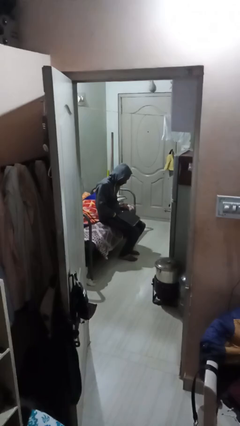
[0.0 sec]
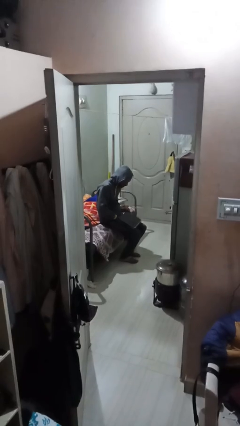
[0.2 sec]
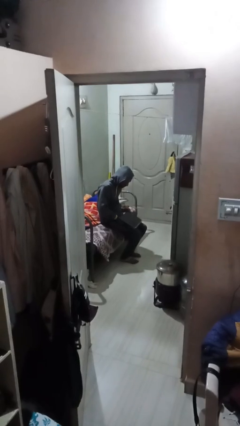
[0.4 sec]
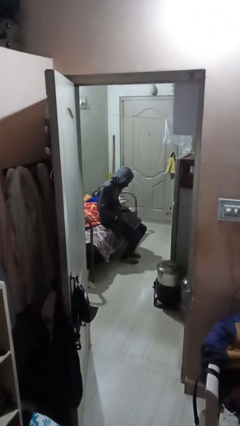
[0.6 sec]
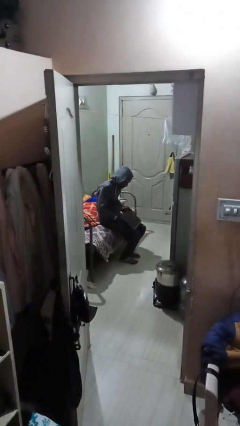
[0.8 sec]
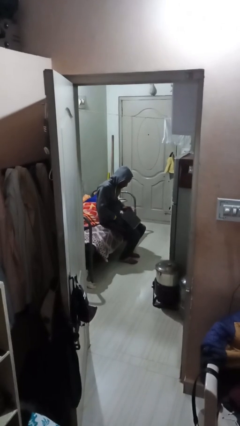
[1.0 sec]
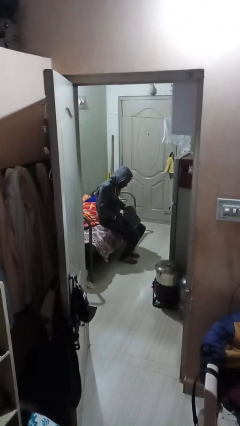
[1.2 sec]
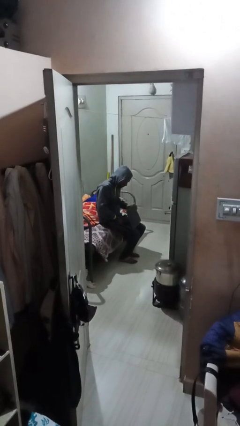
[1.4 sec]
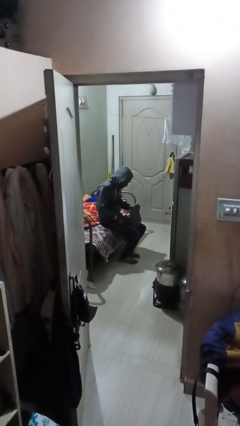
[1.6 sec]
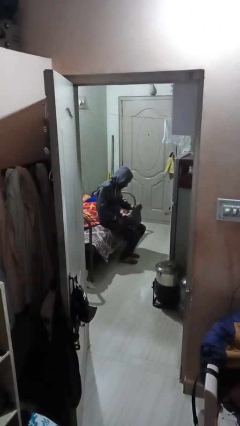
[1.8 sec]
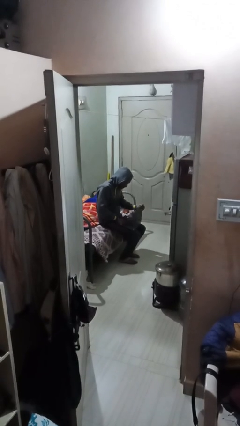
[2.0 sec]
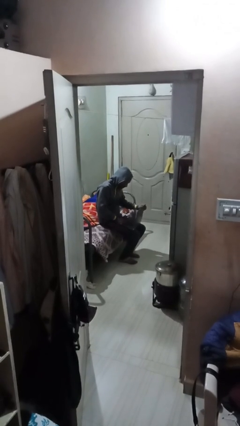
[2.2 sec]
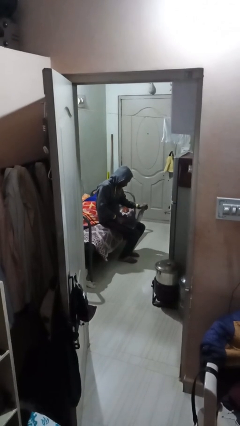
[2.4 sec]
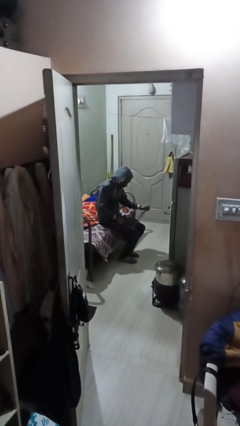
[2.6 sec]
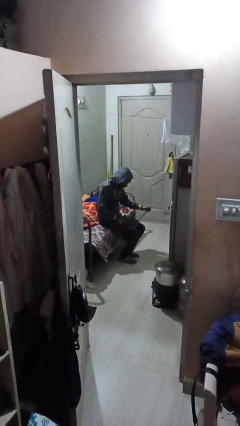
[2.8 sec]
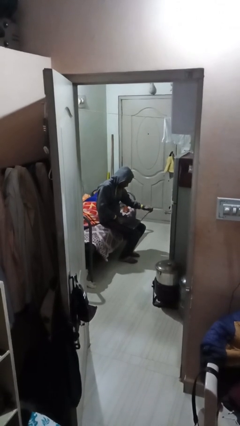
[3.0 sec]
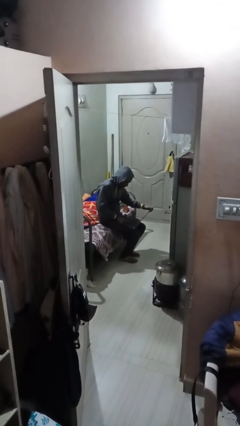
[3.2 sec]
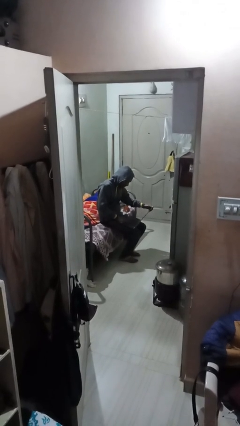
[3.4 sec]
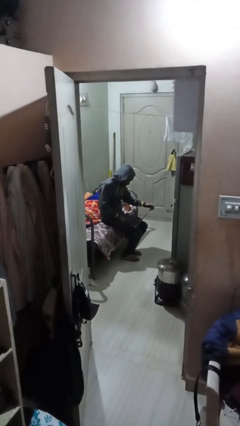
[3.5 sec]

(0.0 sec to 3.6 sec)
person interacts with laptop

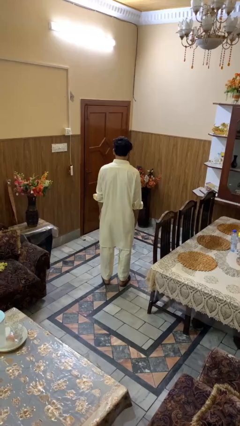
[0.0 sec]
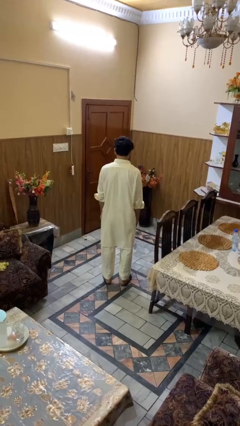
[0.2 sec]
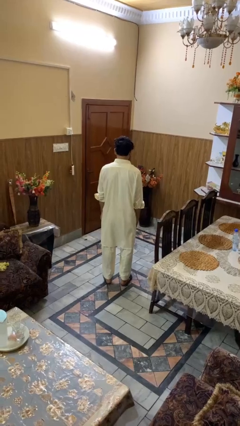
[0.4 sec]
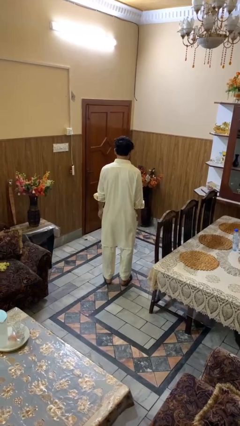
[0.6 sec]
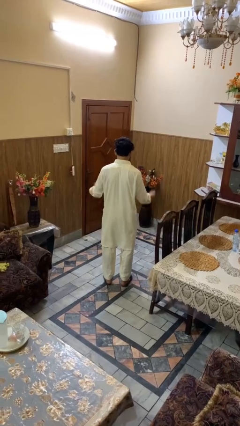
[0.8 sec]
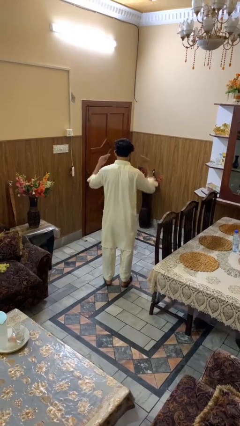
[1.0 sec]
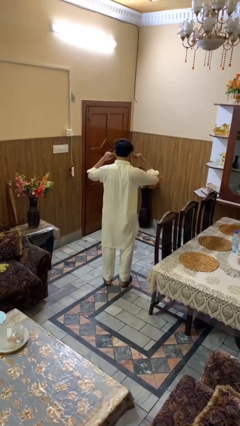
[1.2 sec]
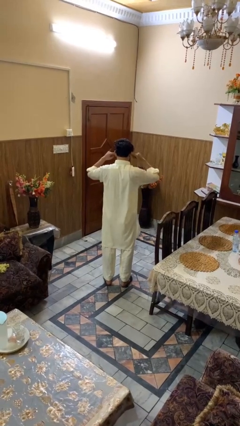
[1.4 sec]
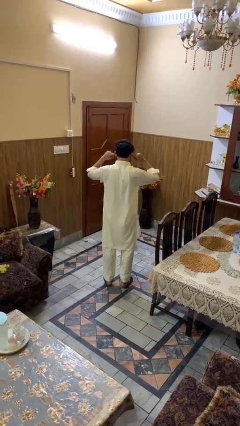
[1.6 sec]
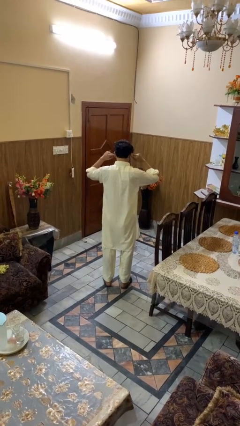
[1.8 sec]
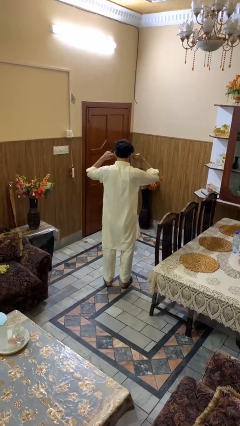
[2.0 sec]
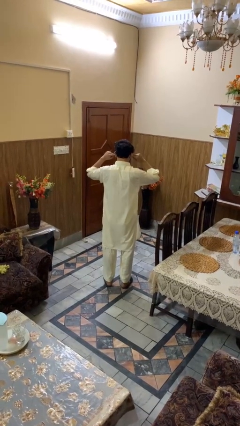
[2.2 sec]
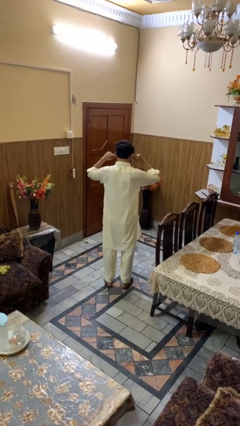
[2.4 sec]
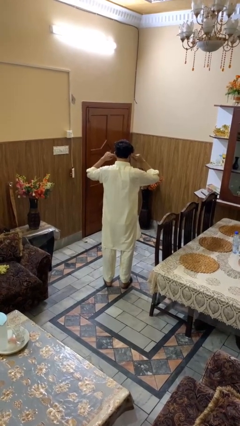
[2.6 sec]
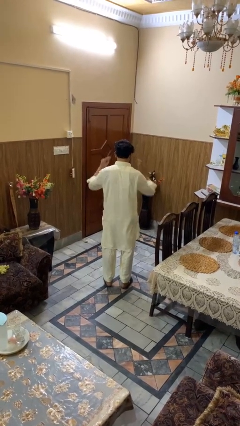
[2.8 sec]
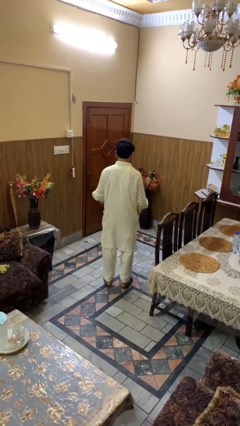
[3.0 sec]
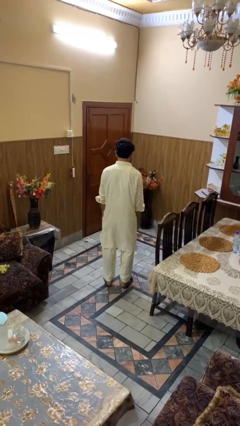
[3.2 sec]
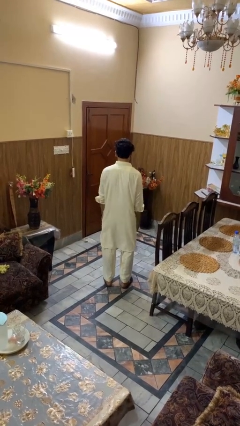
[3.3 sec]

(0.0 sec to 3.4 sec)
person puts fingers in ear

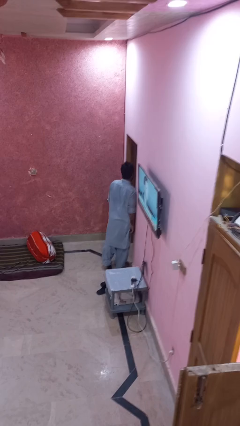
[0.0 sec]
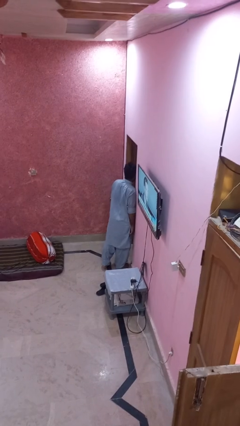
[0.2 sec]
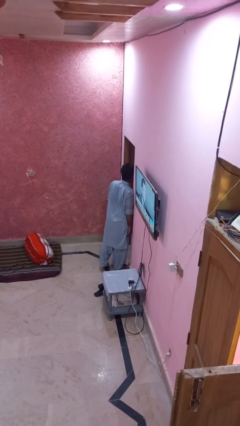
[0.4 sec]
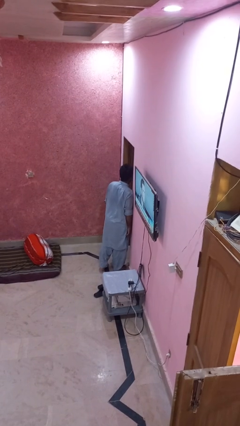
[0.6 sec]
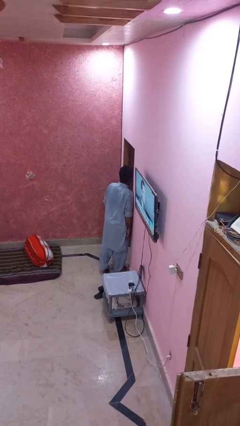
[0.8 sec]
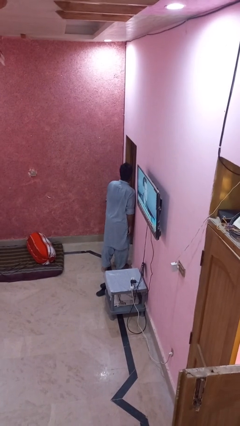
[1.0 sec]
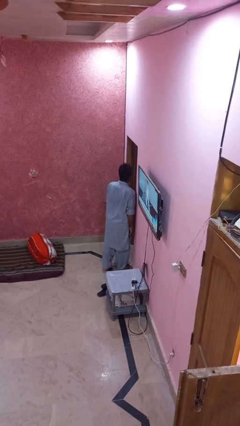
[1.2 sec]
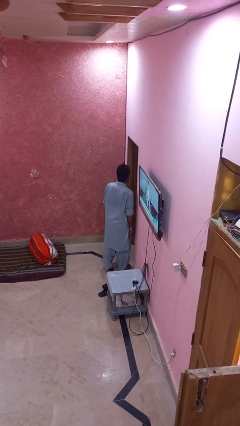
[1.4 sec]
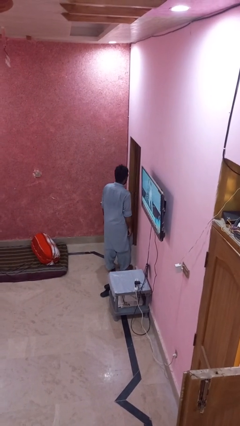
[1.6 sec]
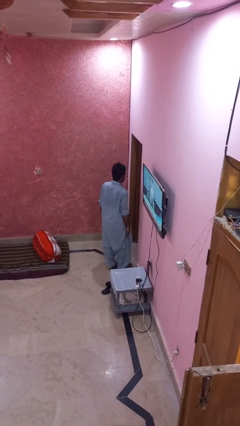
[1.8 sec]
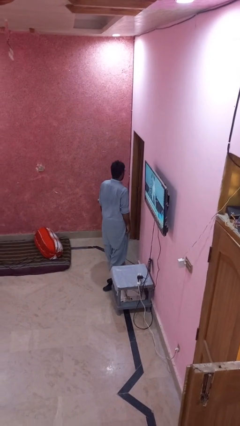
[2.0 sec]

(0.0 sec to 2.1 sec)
person bumps into wall

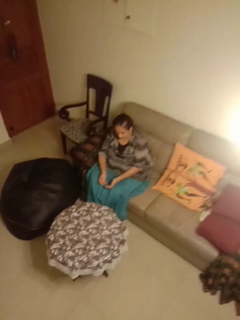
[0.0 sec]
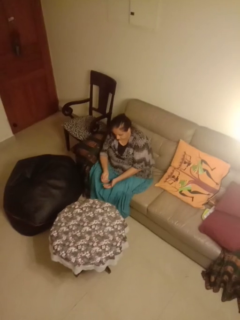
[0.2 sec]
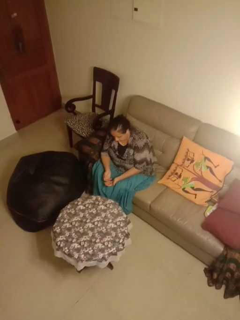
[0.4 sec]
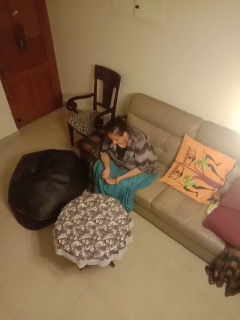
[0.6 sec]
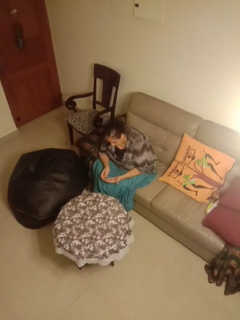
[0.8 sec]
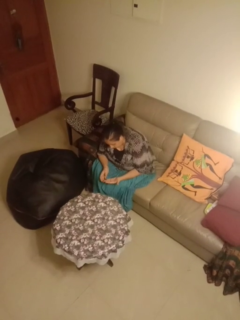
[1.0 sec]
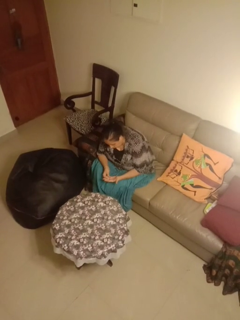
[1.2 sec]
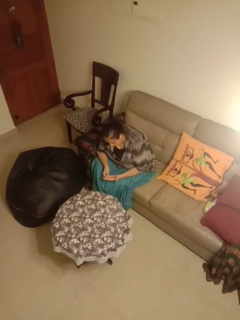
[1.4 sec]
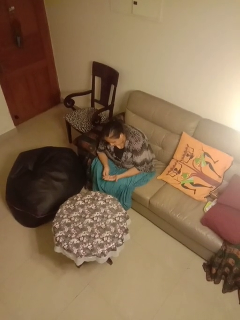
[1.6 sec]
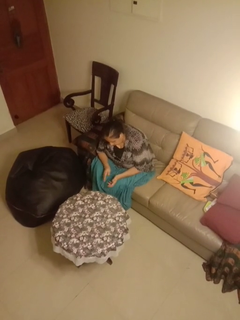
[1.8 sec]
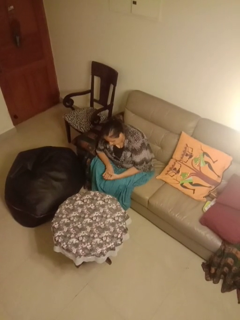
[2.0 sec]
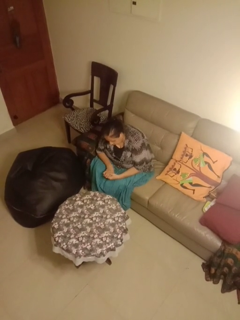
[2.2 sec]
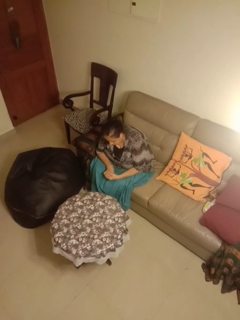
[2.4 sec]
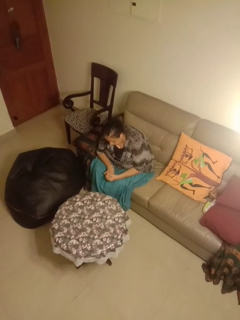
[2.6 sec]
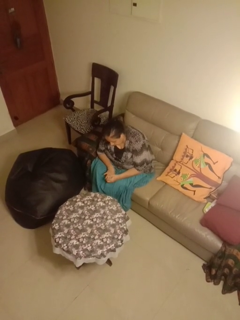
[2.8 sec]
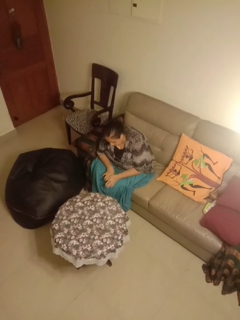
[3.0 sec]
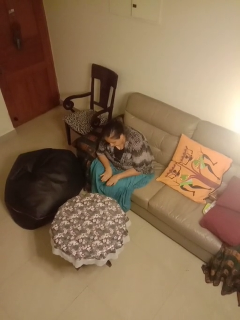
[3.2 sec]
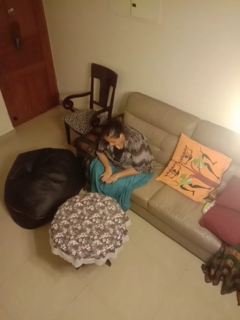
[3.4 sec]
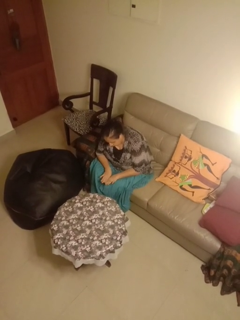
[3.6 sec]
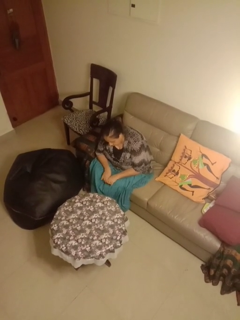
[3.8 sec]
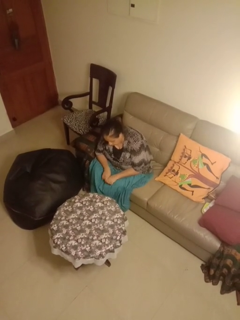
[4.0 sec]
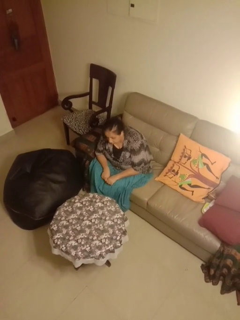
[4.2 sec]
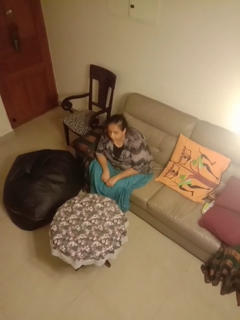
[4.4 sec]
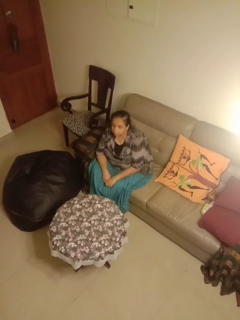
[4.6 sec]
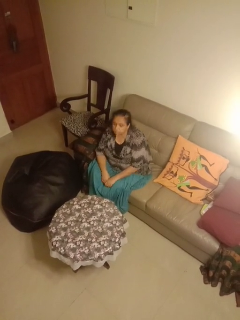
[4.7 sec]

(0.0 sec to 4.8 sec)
person looks at hands in lap

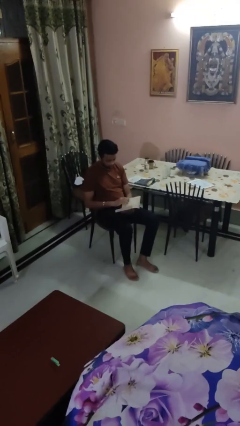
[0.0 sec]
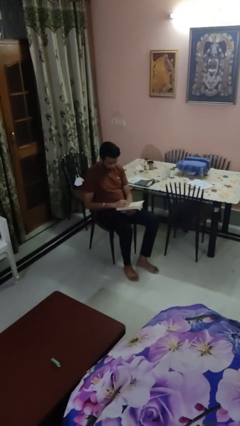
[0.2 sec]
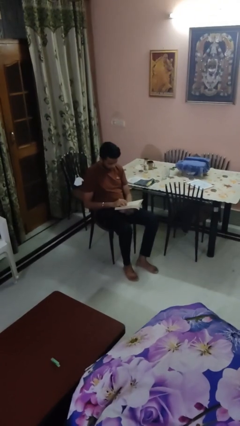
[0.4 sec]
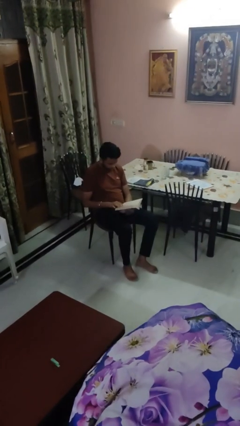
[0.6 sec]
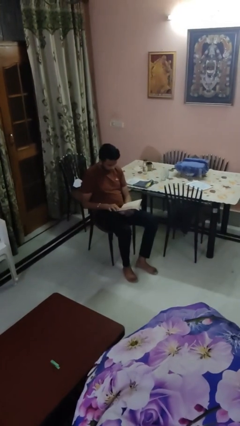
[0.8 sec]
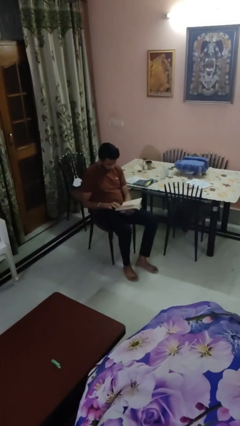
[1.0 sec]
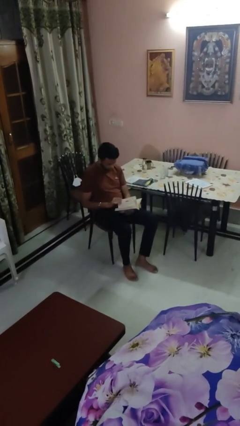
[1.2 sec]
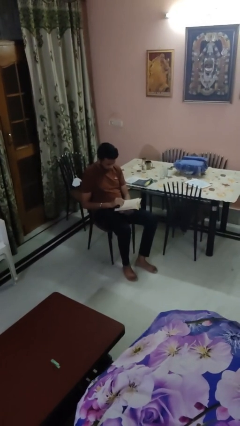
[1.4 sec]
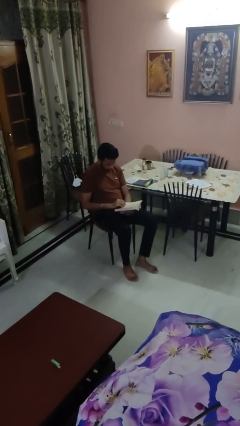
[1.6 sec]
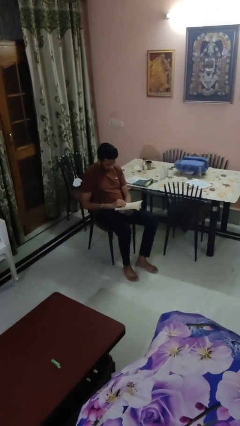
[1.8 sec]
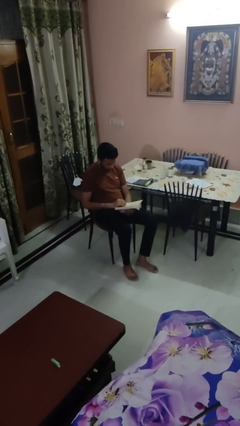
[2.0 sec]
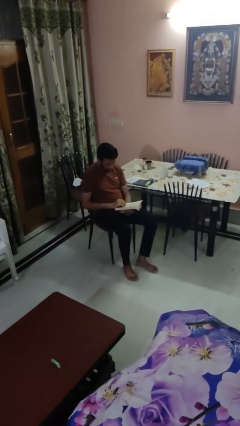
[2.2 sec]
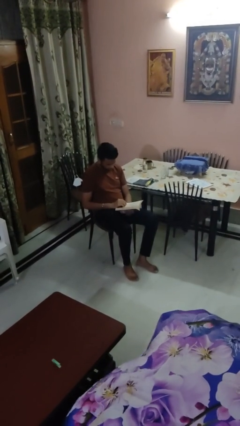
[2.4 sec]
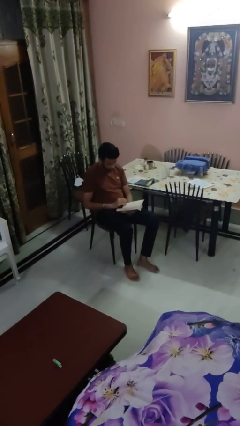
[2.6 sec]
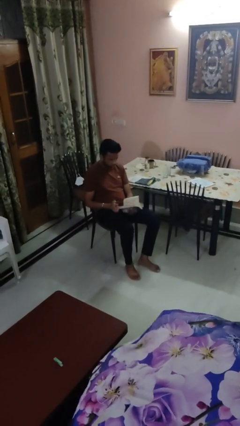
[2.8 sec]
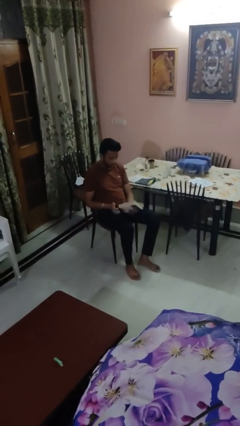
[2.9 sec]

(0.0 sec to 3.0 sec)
person reads book

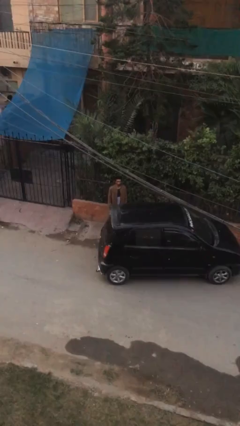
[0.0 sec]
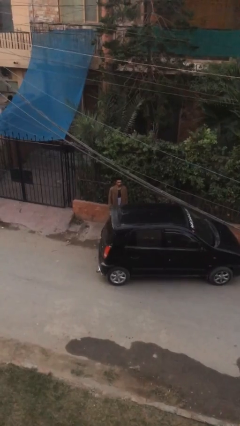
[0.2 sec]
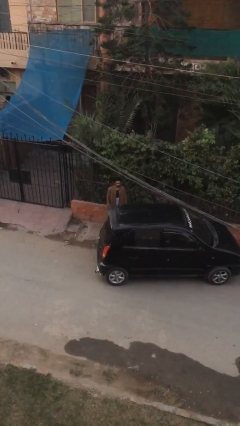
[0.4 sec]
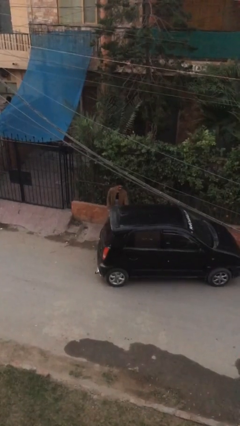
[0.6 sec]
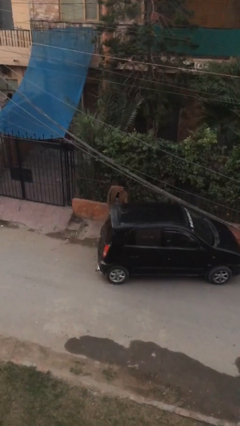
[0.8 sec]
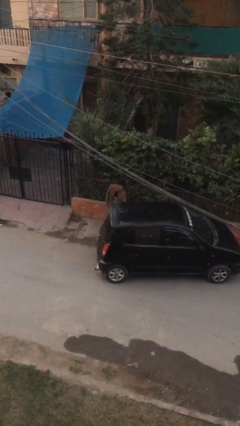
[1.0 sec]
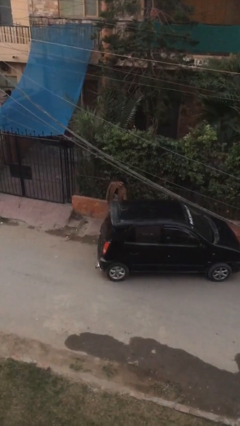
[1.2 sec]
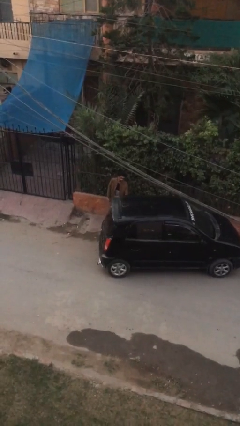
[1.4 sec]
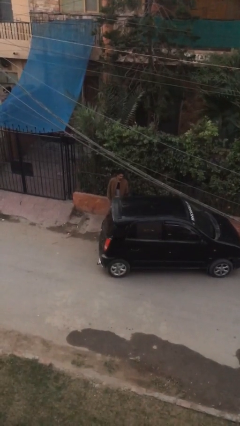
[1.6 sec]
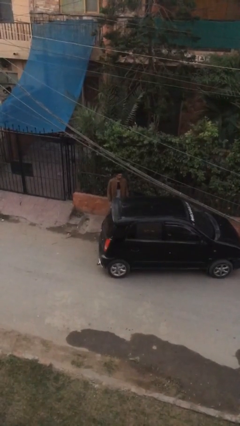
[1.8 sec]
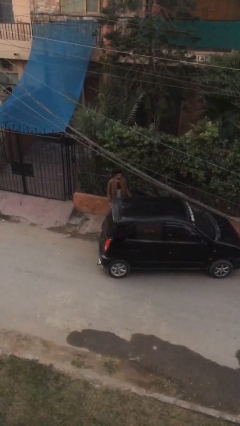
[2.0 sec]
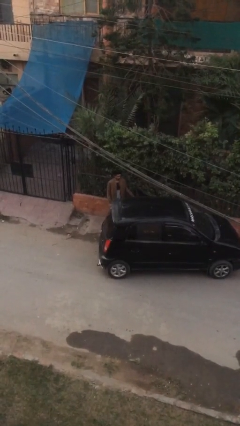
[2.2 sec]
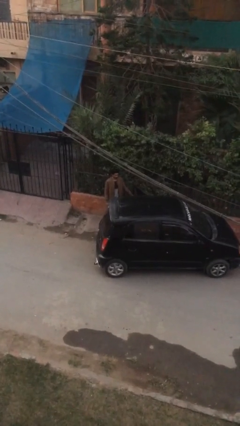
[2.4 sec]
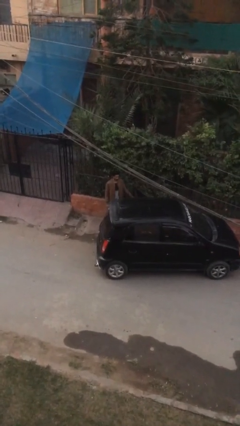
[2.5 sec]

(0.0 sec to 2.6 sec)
person opens car door
